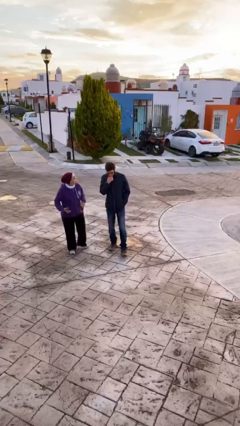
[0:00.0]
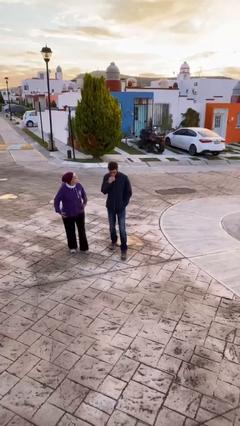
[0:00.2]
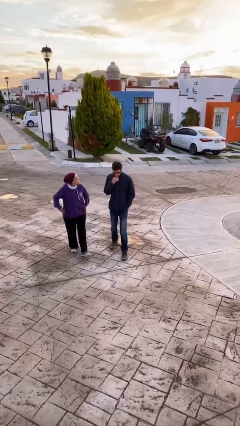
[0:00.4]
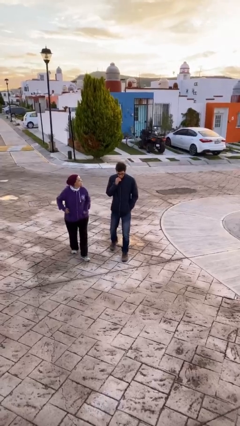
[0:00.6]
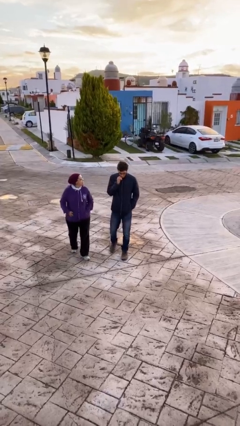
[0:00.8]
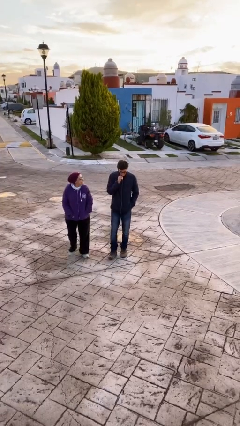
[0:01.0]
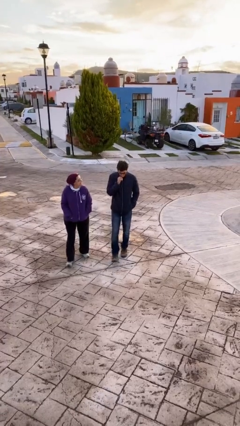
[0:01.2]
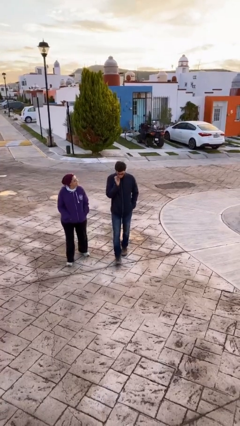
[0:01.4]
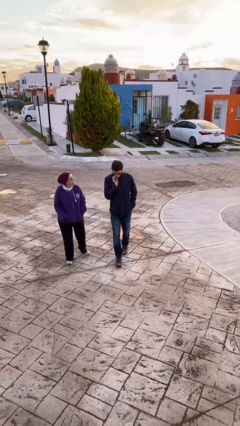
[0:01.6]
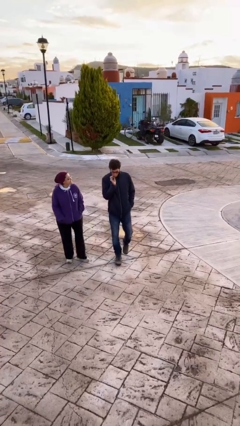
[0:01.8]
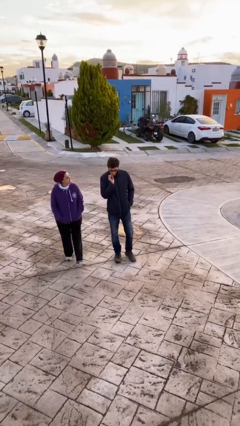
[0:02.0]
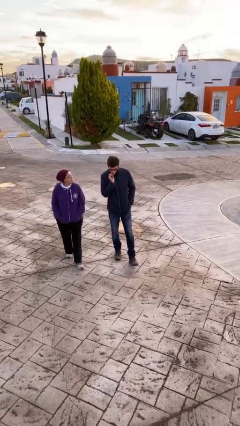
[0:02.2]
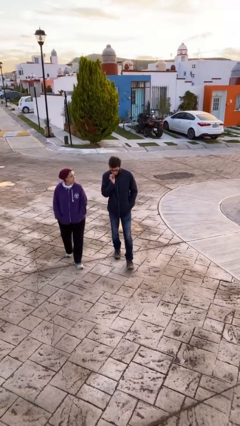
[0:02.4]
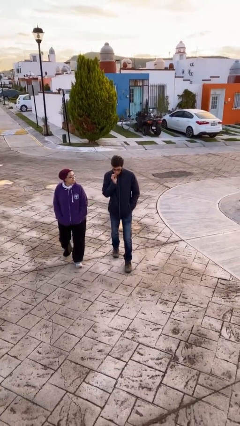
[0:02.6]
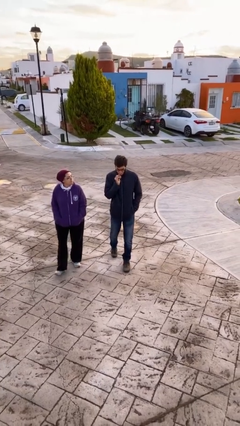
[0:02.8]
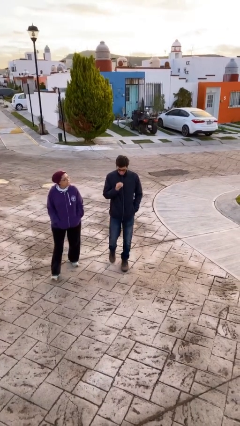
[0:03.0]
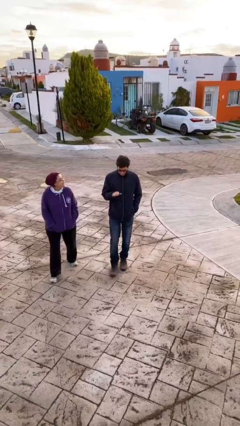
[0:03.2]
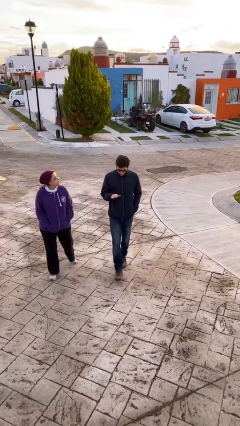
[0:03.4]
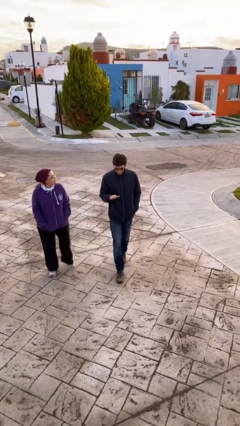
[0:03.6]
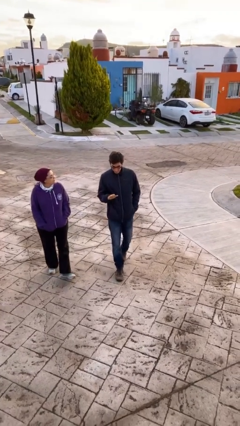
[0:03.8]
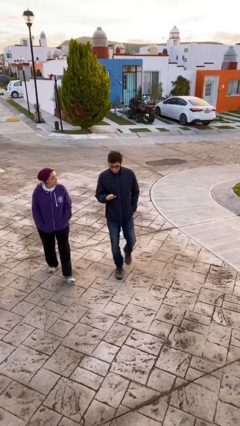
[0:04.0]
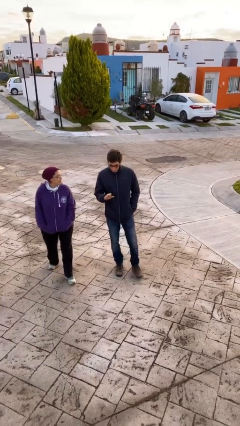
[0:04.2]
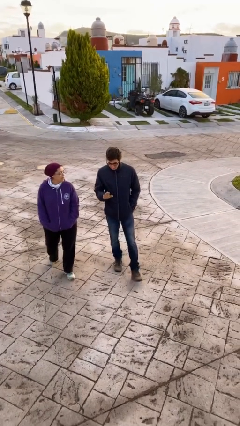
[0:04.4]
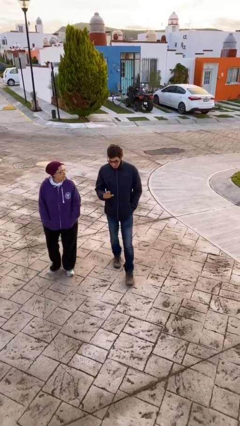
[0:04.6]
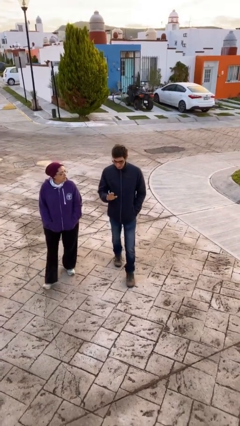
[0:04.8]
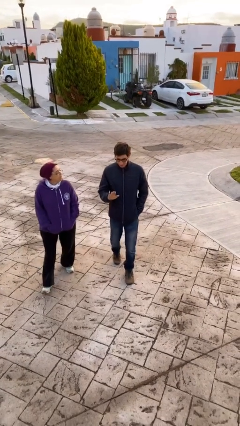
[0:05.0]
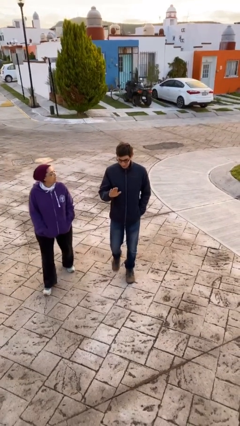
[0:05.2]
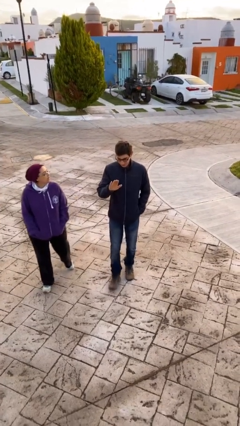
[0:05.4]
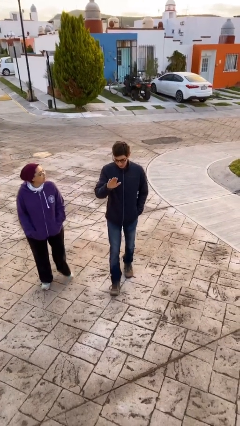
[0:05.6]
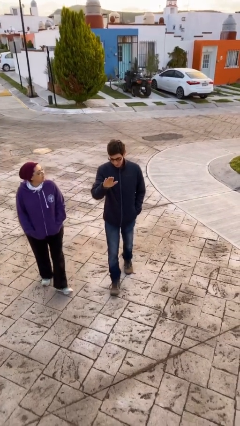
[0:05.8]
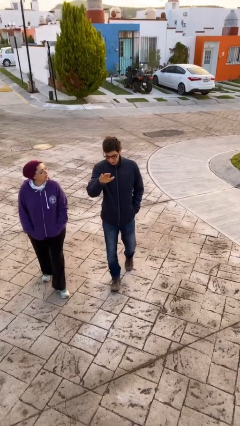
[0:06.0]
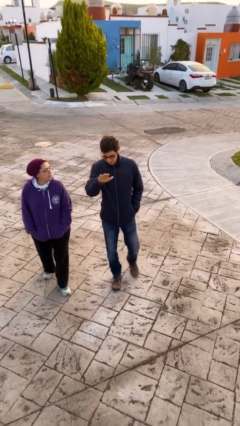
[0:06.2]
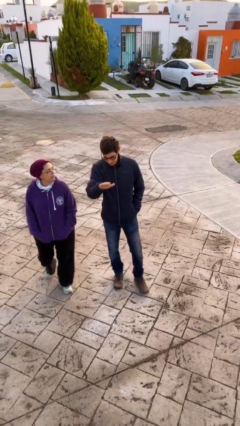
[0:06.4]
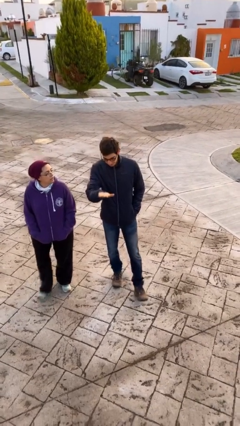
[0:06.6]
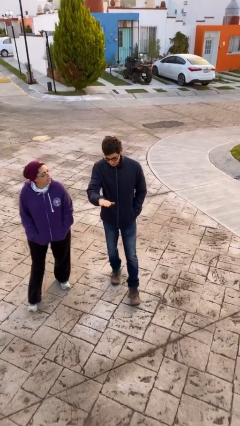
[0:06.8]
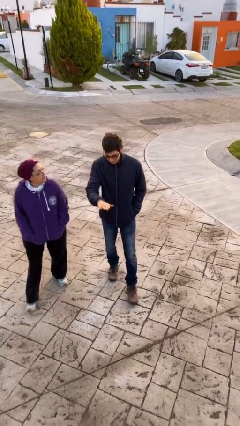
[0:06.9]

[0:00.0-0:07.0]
person talks to person

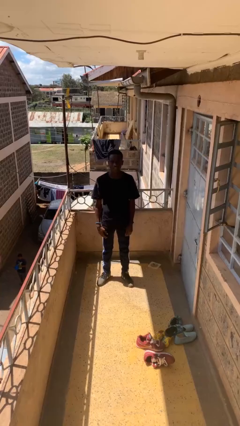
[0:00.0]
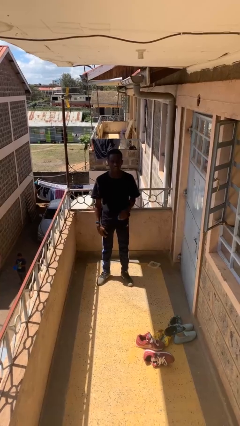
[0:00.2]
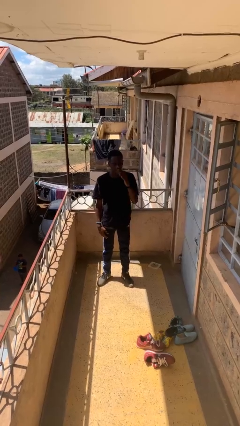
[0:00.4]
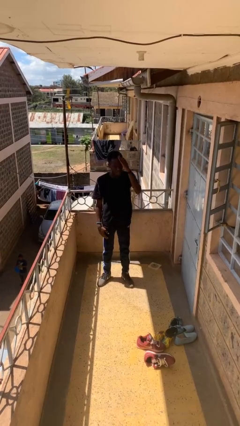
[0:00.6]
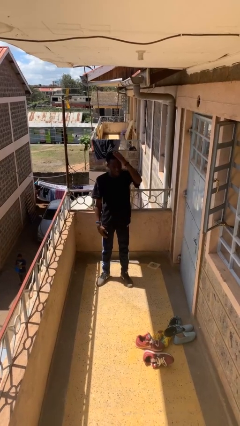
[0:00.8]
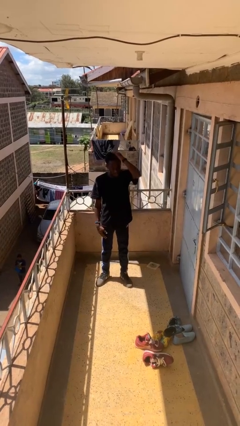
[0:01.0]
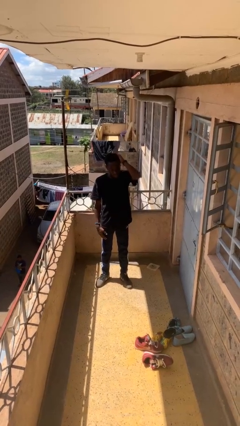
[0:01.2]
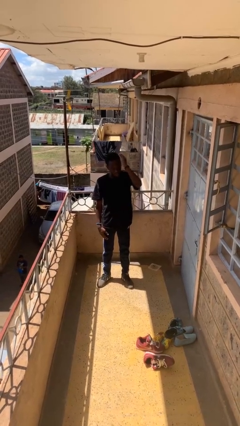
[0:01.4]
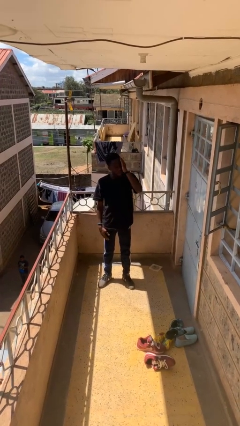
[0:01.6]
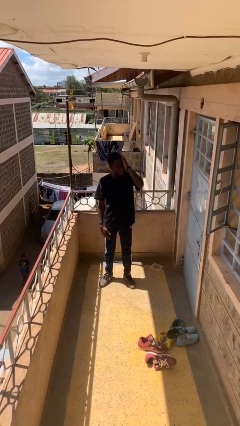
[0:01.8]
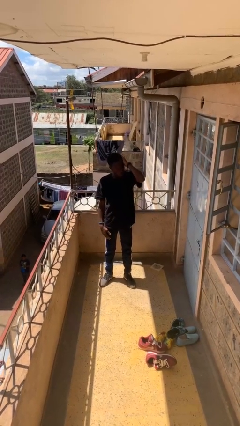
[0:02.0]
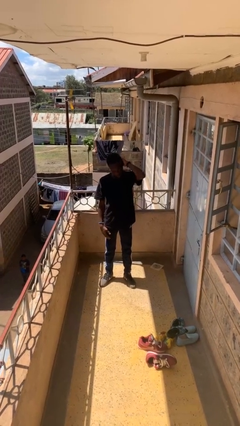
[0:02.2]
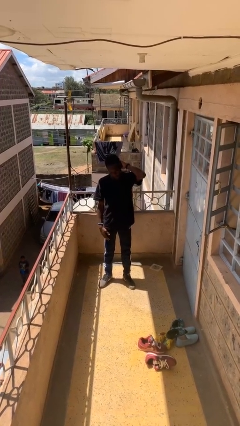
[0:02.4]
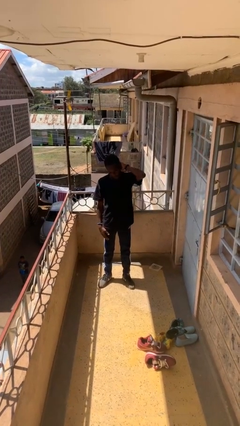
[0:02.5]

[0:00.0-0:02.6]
person strokes hair

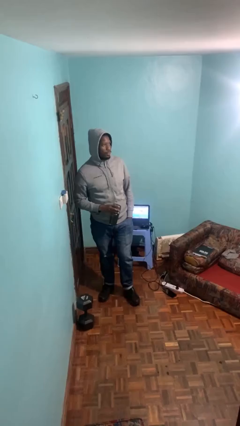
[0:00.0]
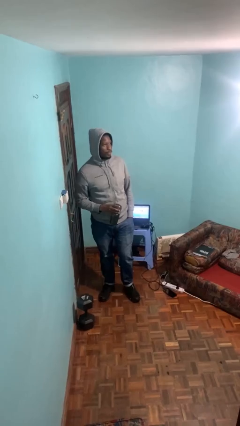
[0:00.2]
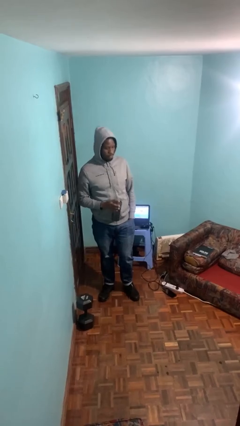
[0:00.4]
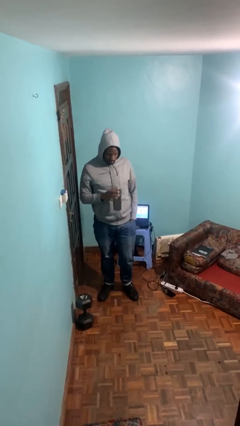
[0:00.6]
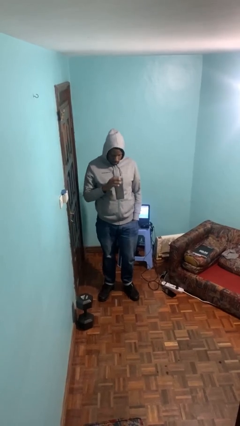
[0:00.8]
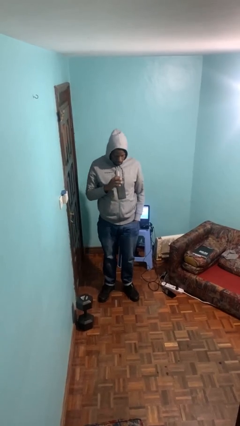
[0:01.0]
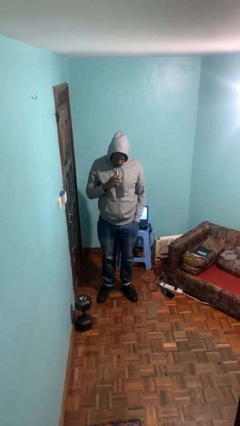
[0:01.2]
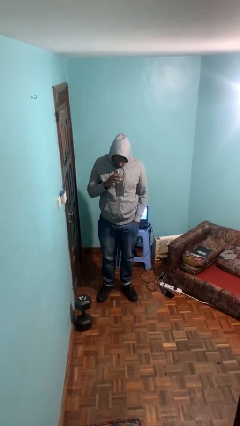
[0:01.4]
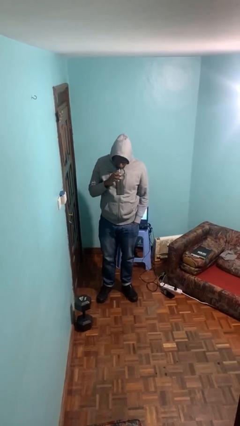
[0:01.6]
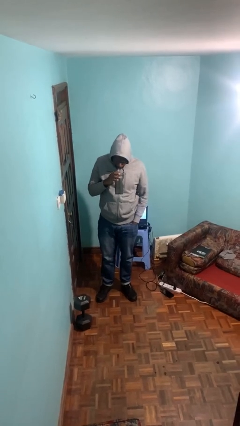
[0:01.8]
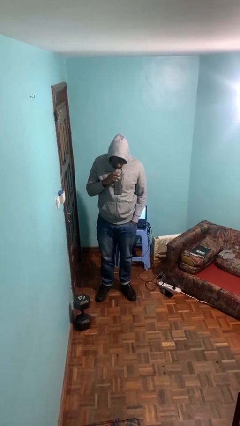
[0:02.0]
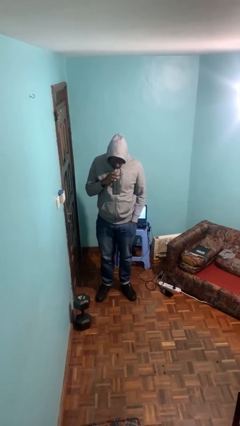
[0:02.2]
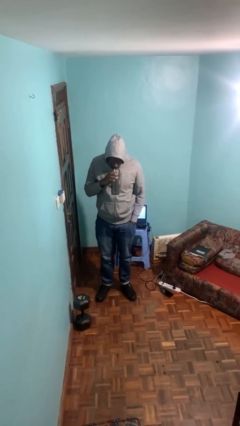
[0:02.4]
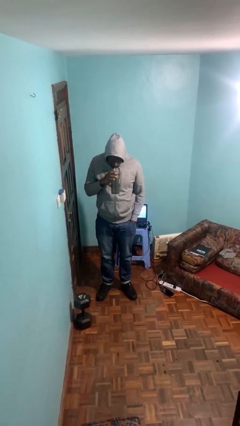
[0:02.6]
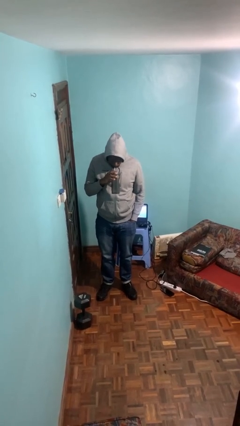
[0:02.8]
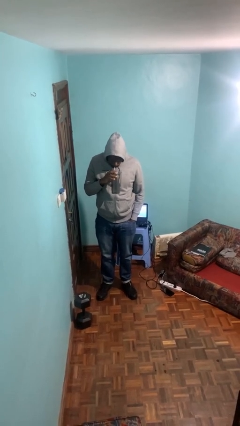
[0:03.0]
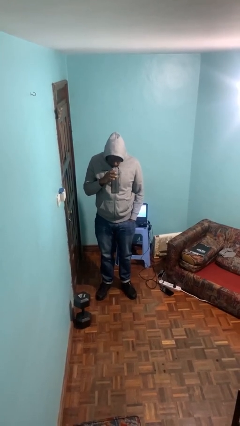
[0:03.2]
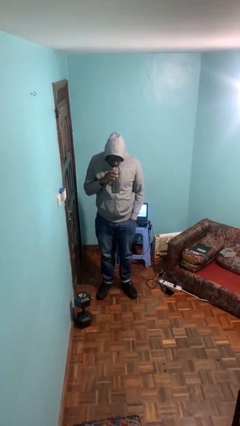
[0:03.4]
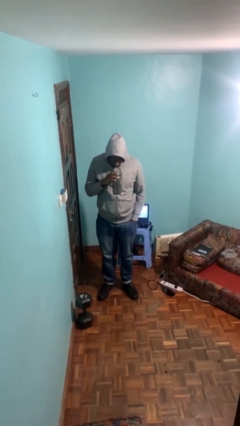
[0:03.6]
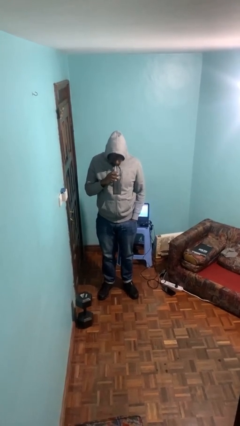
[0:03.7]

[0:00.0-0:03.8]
person drinks from straw

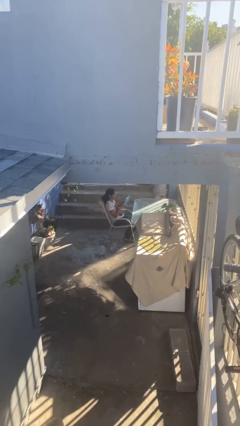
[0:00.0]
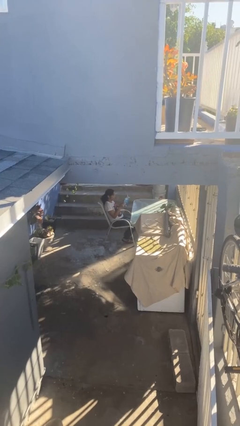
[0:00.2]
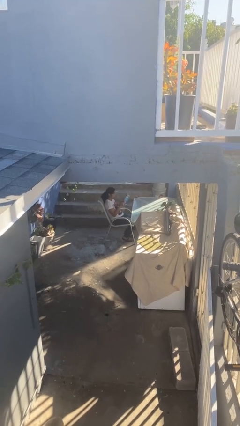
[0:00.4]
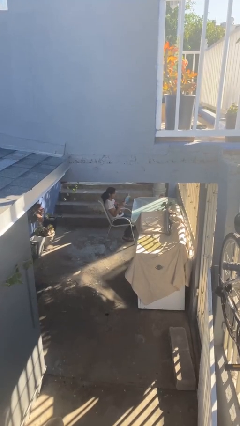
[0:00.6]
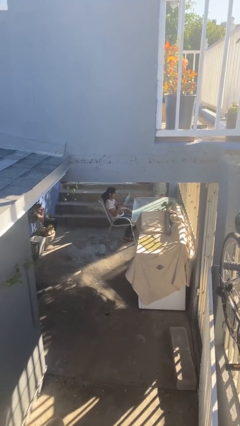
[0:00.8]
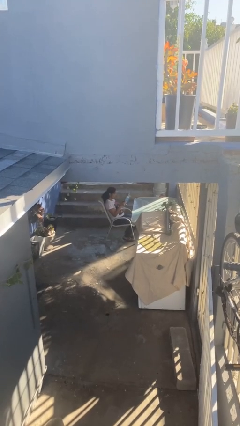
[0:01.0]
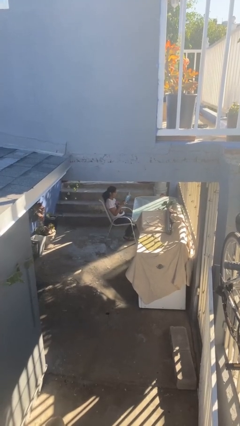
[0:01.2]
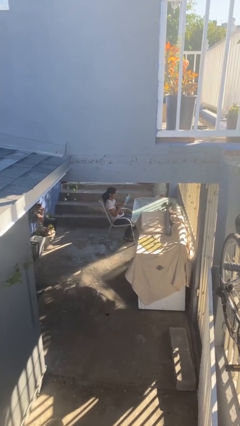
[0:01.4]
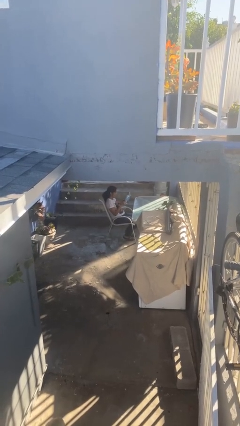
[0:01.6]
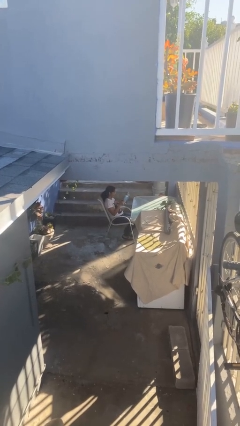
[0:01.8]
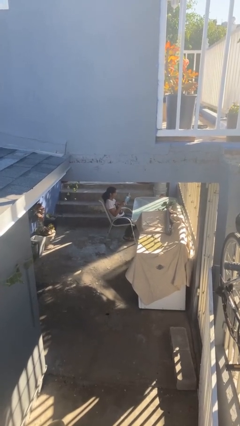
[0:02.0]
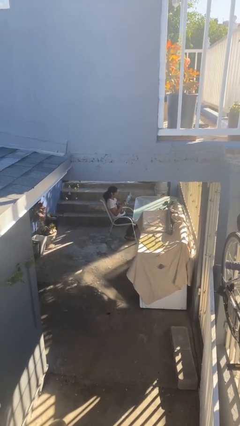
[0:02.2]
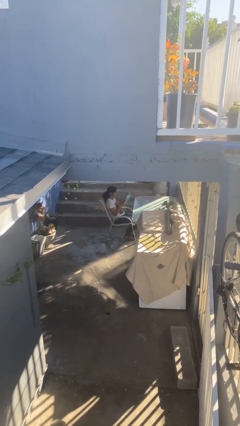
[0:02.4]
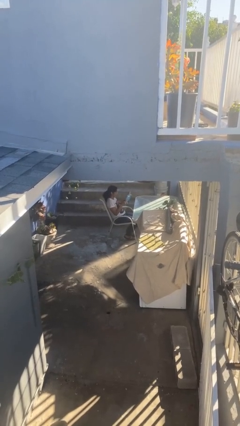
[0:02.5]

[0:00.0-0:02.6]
person reads document

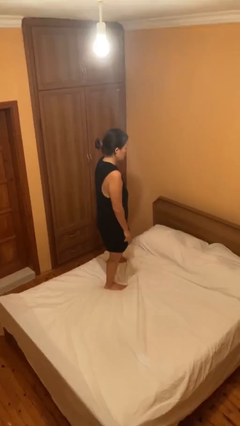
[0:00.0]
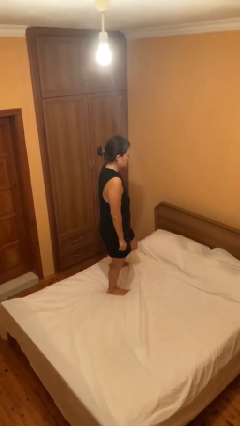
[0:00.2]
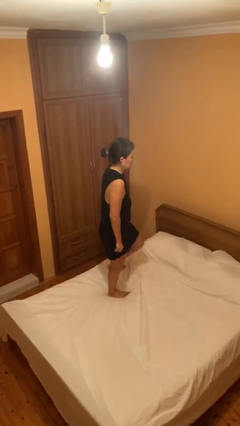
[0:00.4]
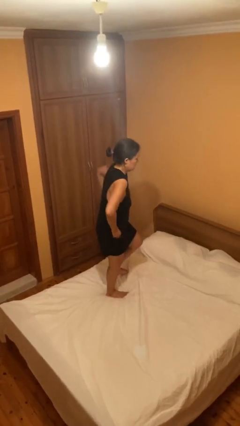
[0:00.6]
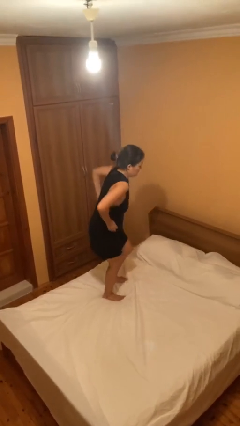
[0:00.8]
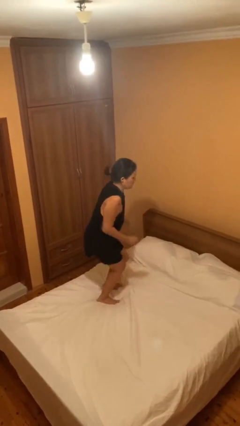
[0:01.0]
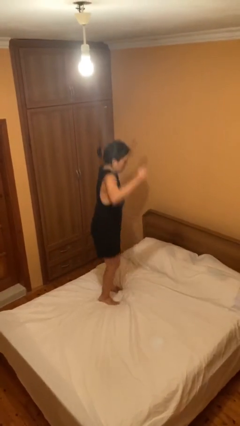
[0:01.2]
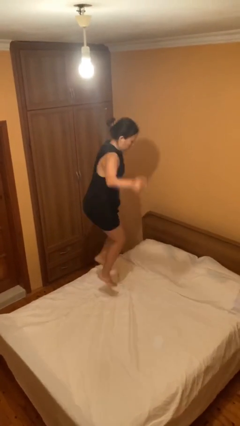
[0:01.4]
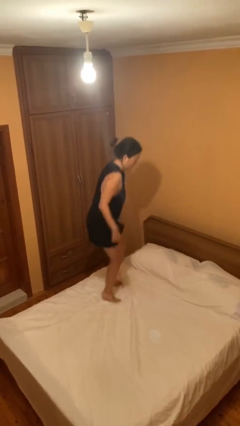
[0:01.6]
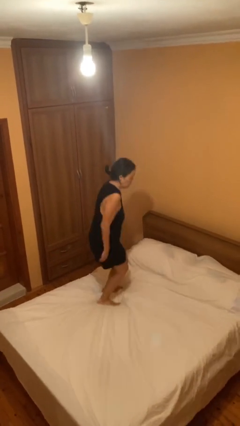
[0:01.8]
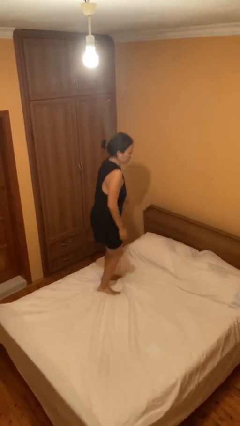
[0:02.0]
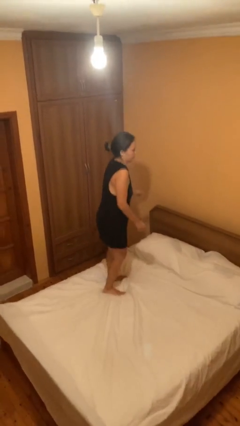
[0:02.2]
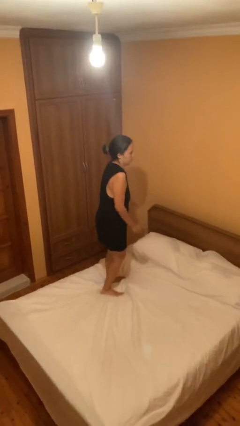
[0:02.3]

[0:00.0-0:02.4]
person jumps on bed
